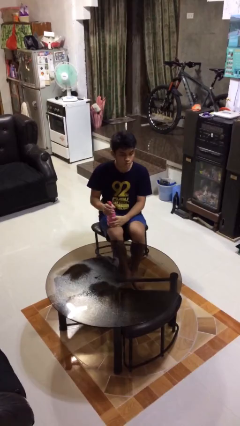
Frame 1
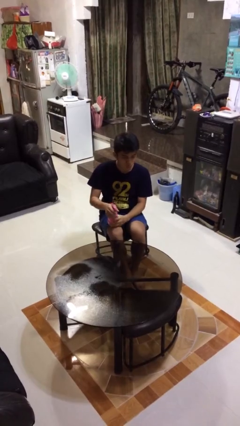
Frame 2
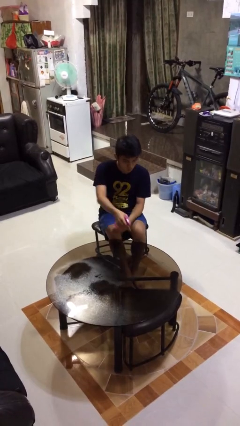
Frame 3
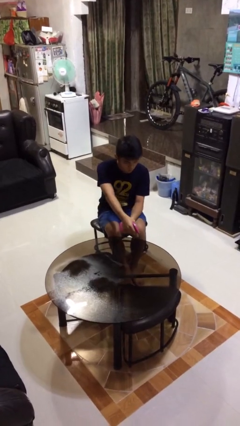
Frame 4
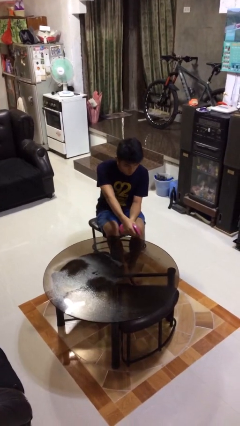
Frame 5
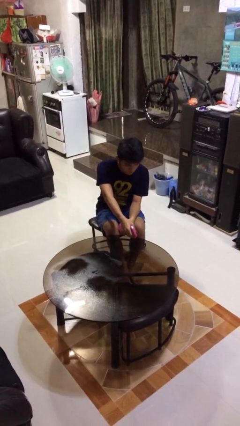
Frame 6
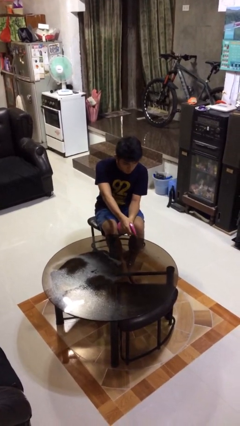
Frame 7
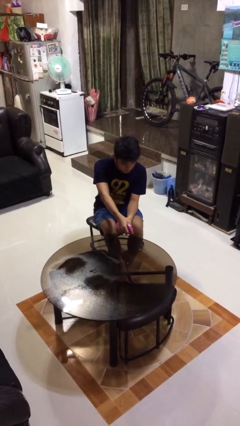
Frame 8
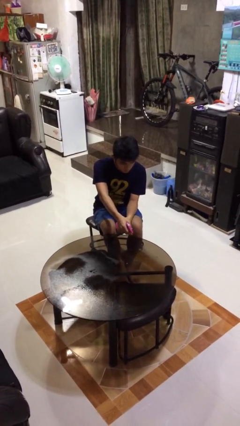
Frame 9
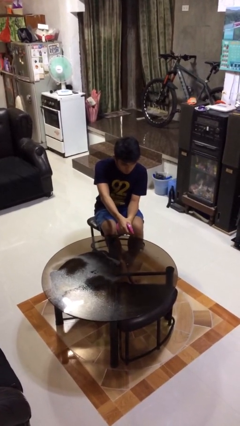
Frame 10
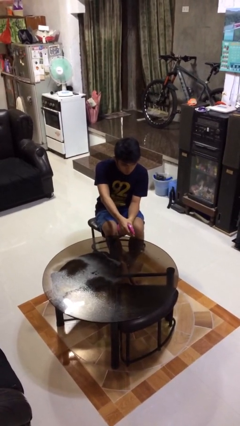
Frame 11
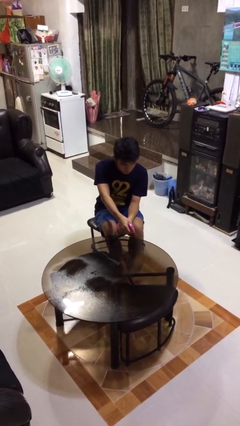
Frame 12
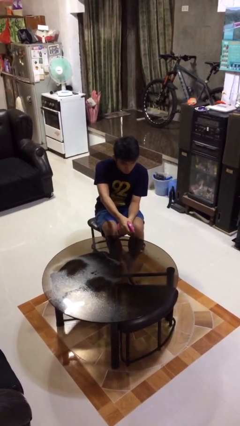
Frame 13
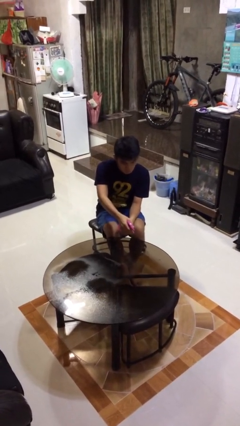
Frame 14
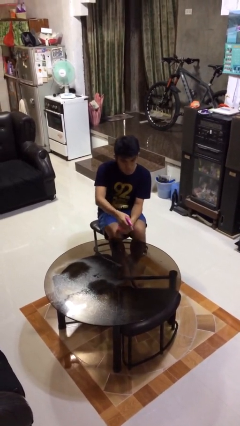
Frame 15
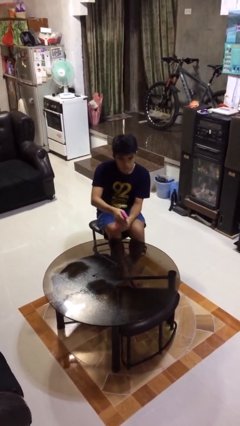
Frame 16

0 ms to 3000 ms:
person sprays from bottle

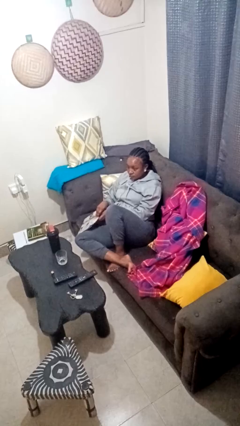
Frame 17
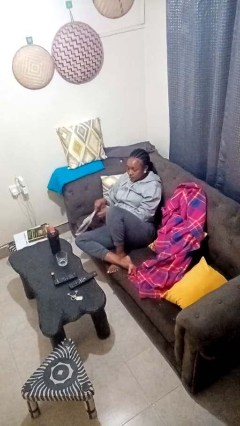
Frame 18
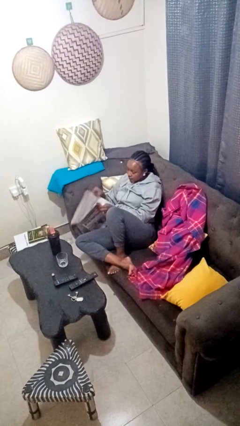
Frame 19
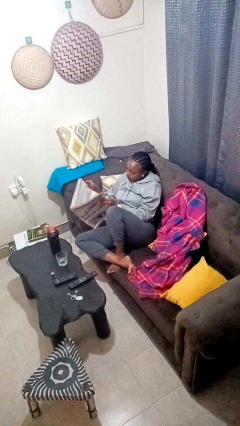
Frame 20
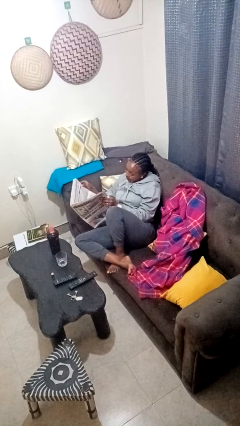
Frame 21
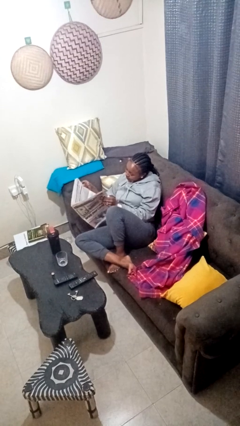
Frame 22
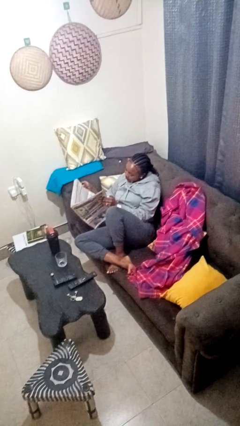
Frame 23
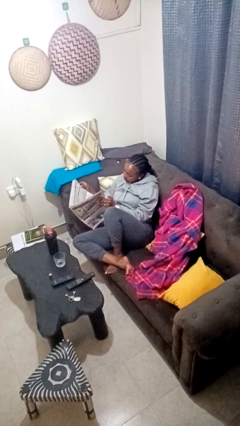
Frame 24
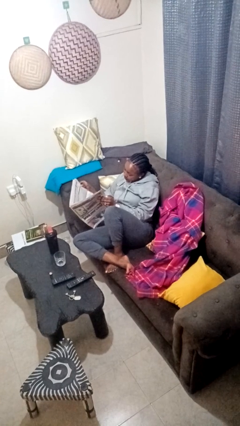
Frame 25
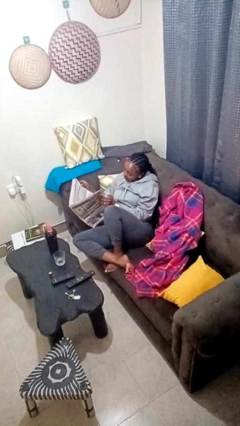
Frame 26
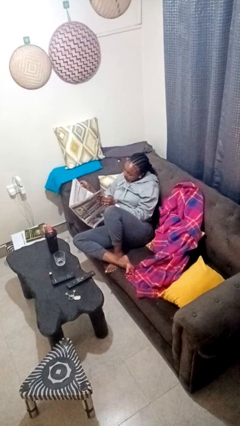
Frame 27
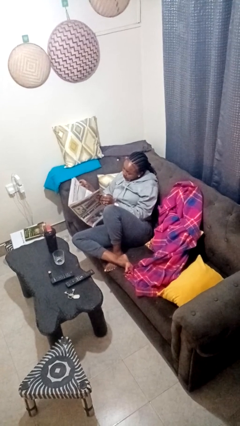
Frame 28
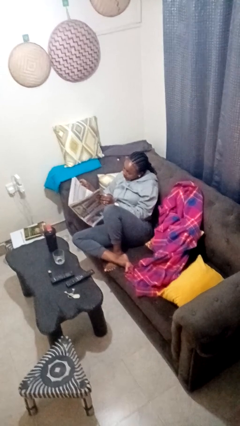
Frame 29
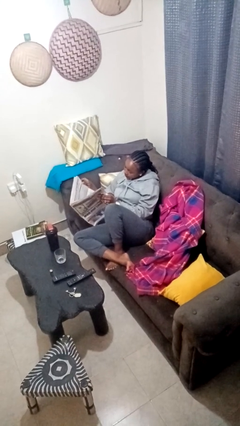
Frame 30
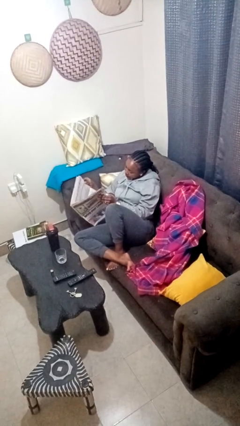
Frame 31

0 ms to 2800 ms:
person reads newspaper

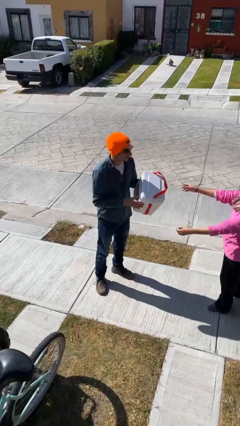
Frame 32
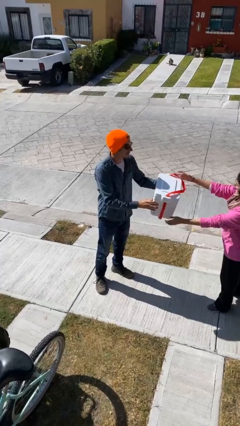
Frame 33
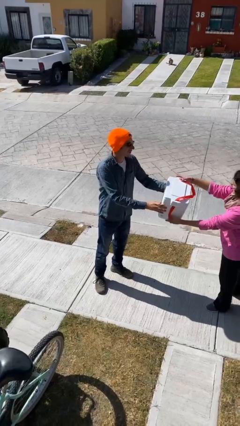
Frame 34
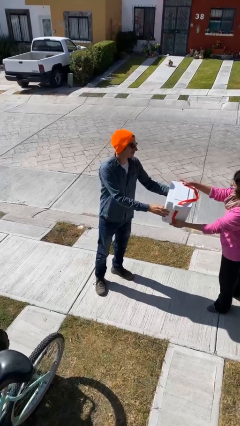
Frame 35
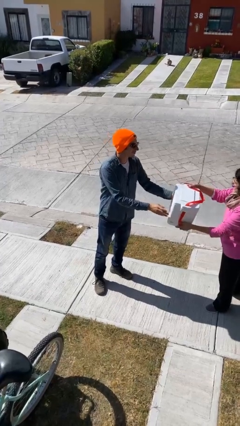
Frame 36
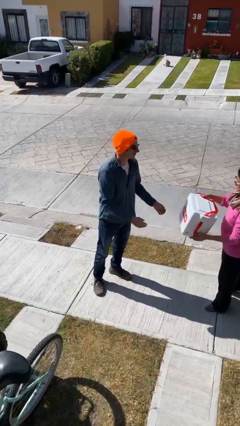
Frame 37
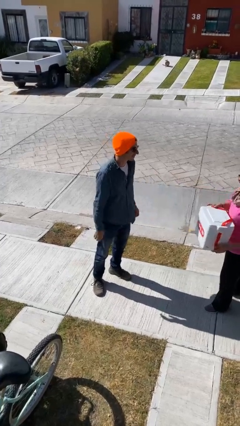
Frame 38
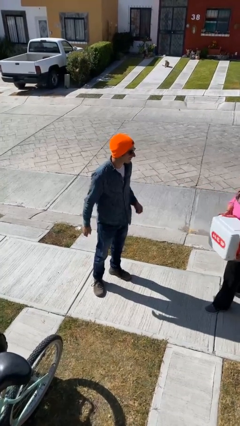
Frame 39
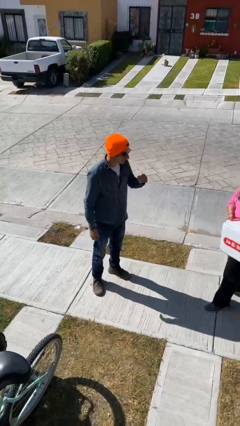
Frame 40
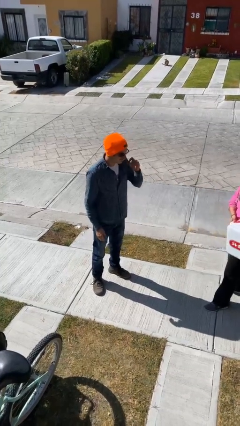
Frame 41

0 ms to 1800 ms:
person transfers object to person

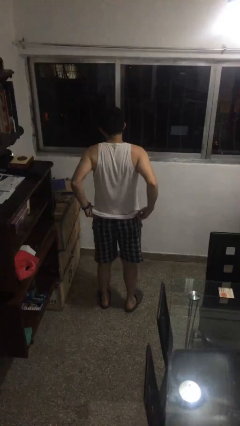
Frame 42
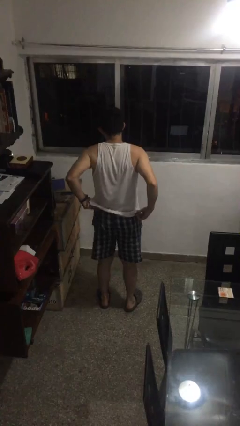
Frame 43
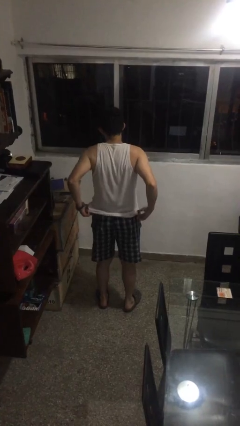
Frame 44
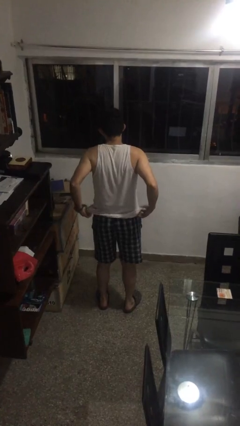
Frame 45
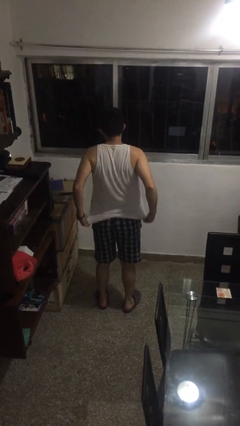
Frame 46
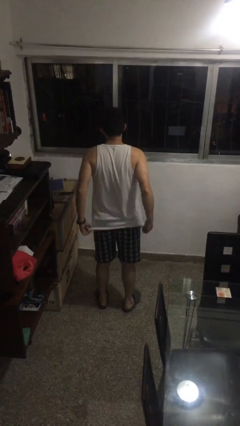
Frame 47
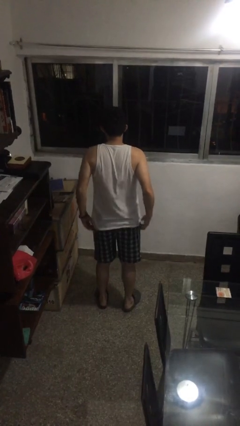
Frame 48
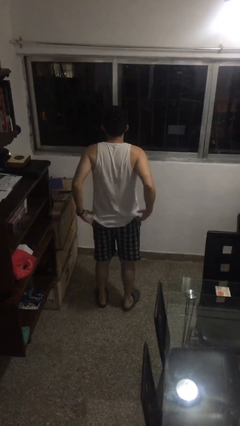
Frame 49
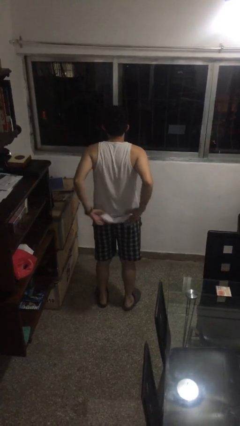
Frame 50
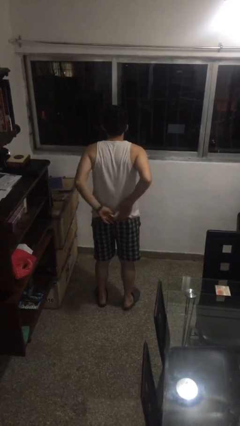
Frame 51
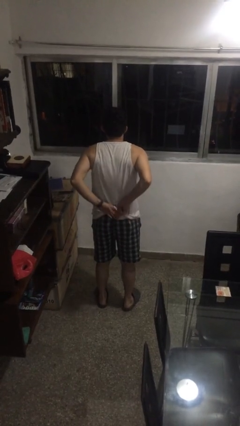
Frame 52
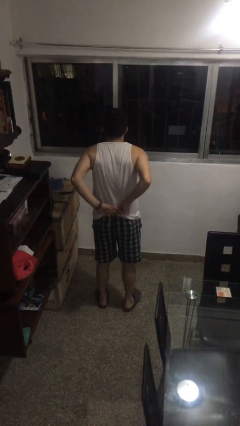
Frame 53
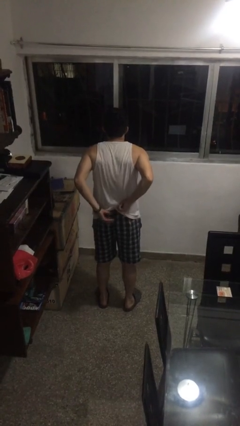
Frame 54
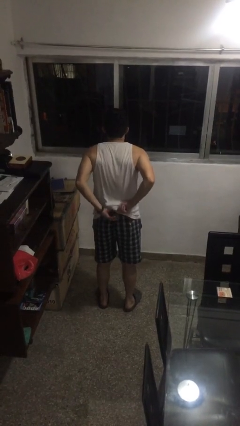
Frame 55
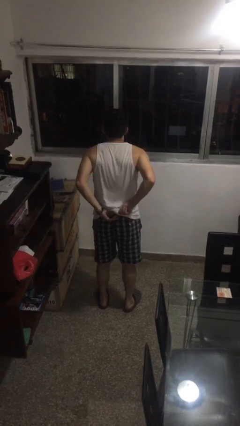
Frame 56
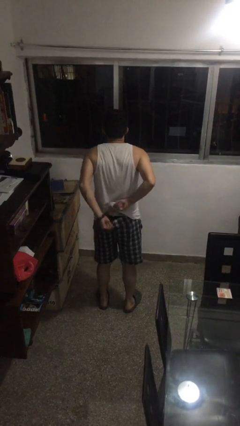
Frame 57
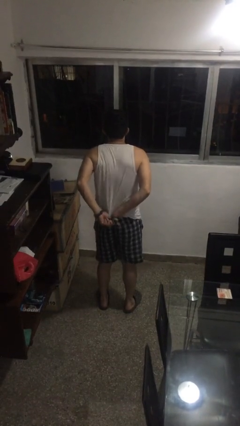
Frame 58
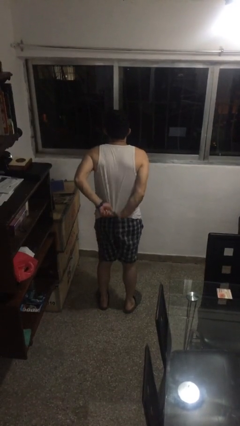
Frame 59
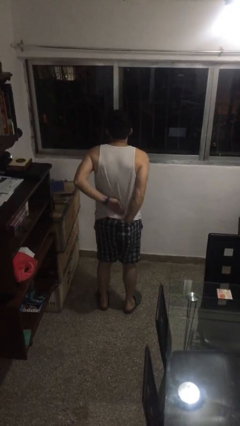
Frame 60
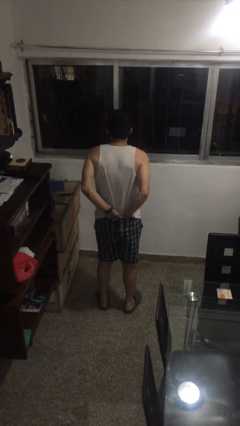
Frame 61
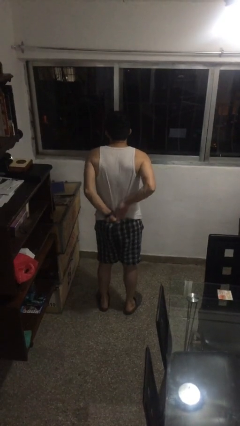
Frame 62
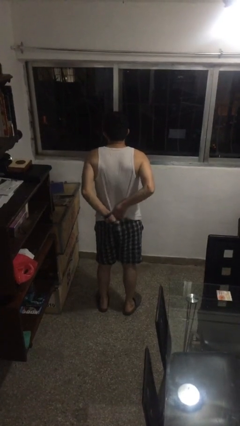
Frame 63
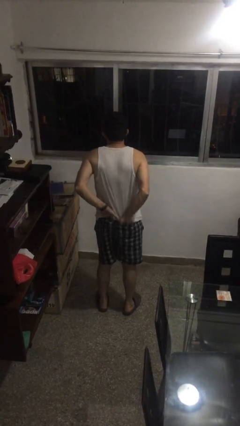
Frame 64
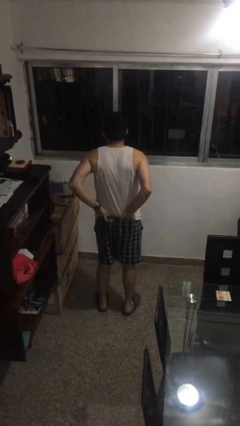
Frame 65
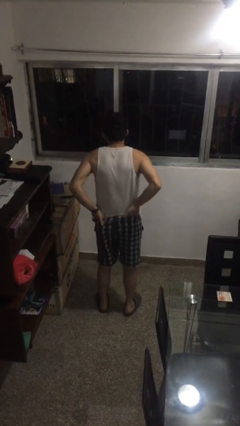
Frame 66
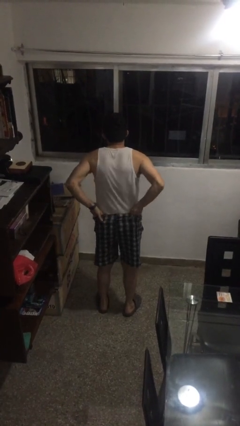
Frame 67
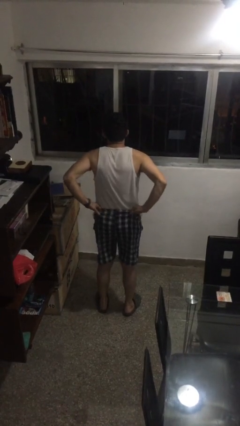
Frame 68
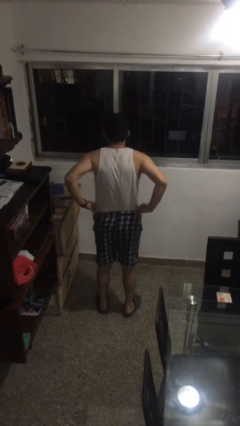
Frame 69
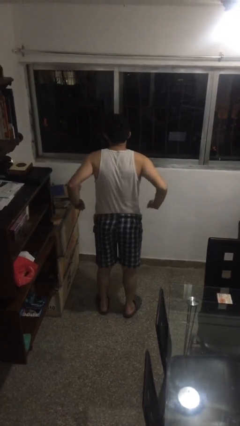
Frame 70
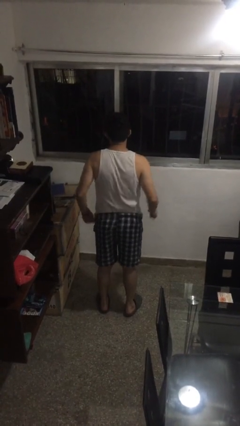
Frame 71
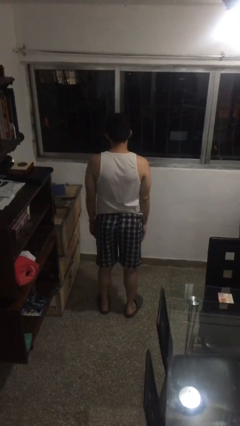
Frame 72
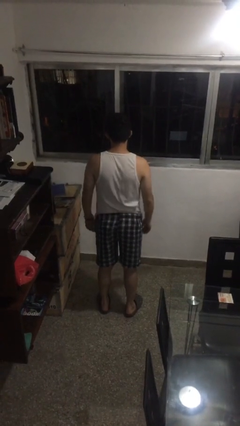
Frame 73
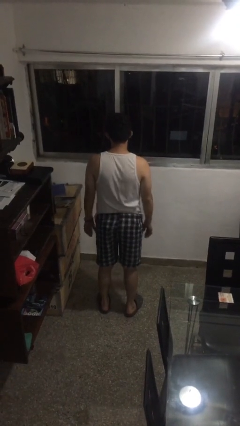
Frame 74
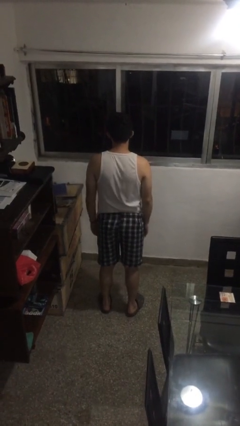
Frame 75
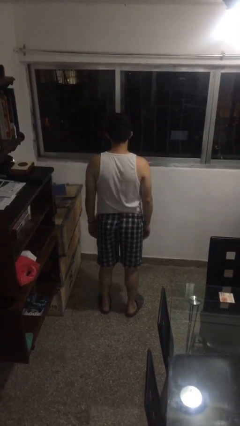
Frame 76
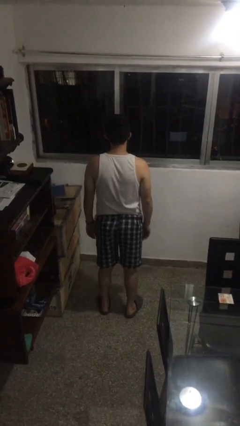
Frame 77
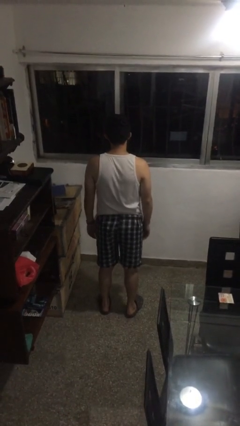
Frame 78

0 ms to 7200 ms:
person tucks in shirt

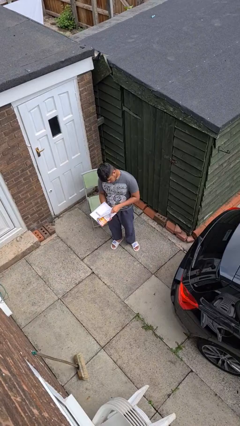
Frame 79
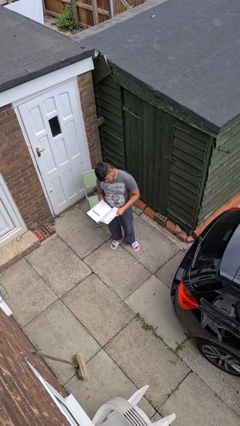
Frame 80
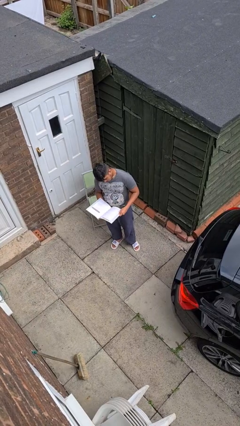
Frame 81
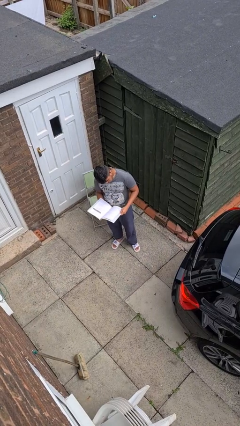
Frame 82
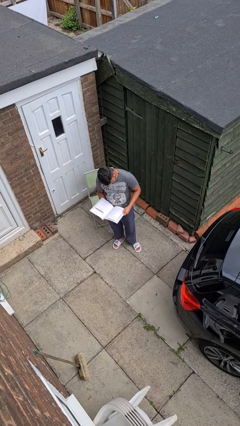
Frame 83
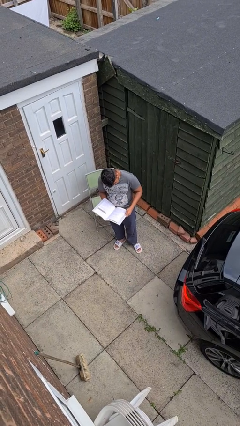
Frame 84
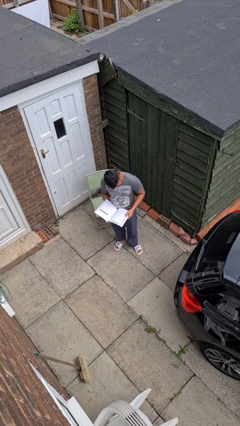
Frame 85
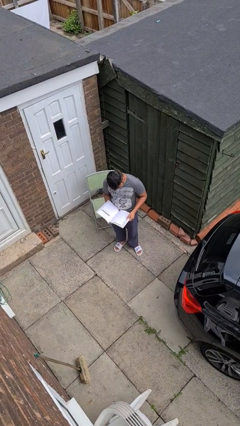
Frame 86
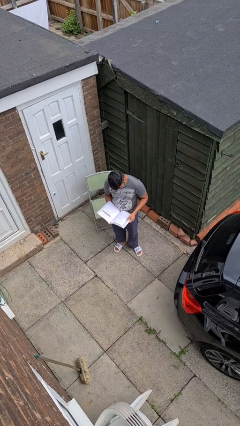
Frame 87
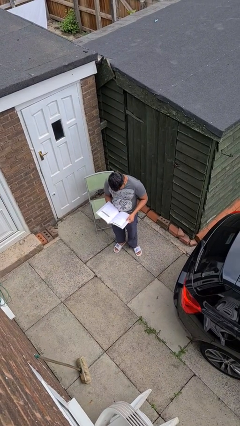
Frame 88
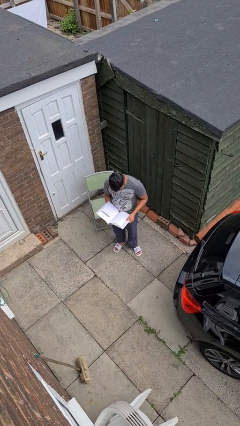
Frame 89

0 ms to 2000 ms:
person reads book

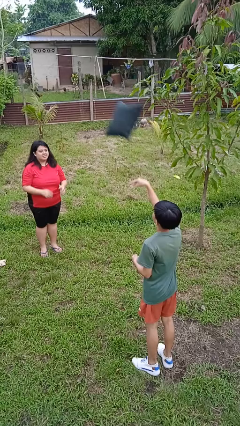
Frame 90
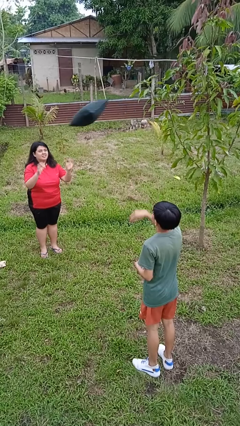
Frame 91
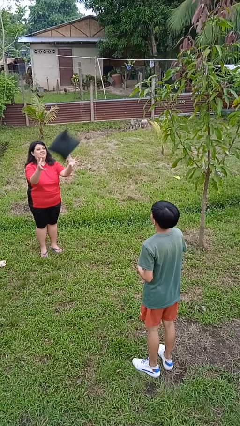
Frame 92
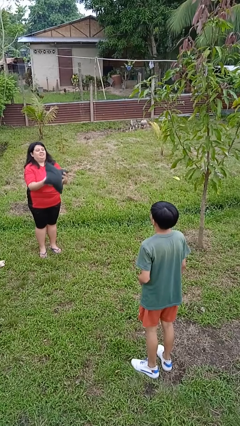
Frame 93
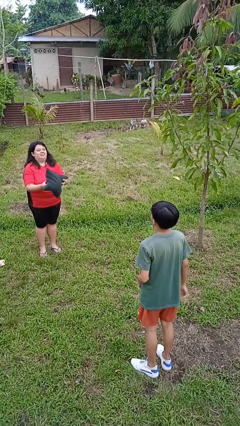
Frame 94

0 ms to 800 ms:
person catches object from person
